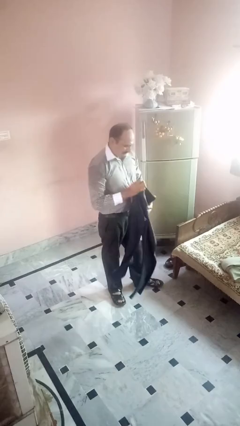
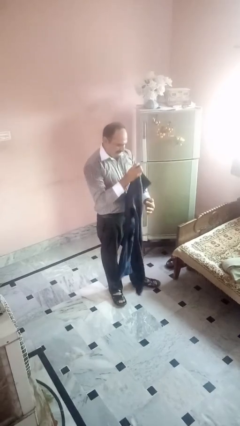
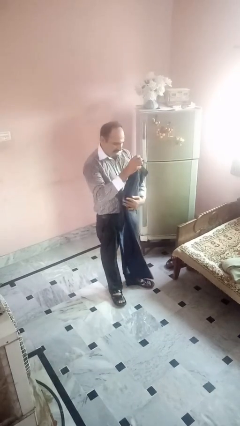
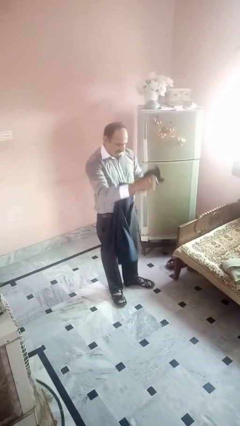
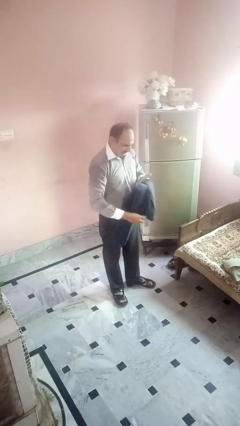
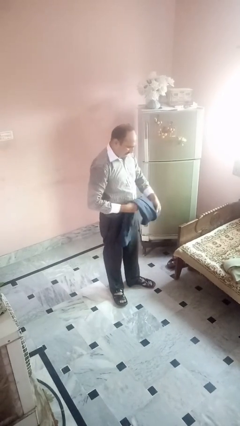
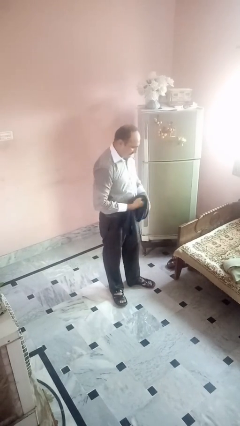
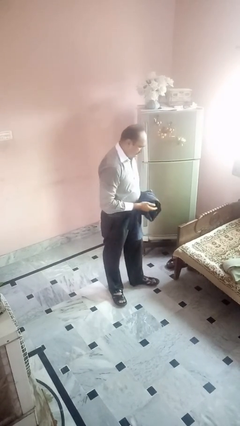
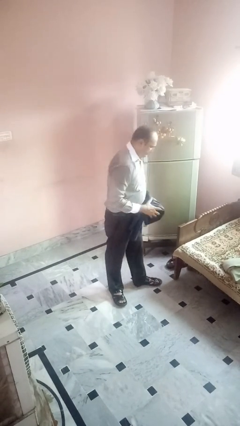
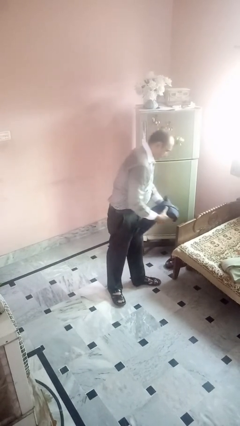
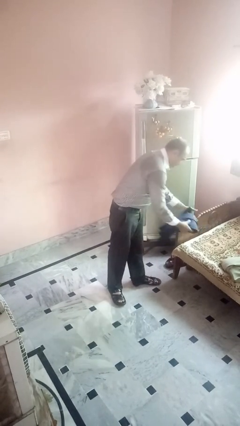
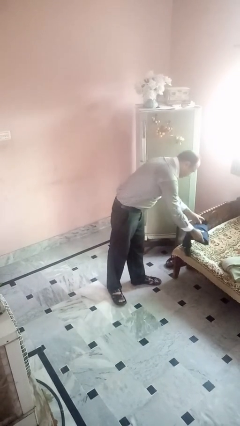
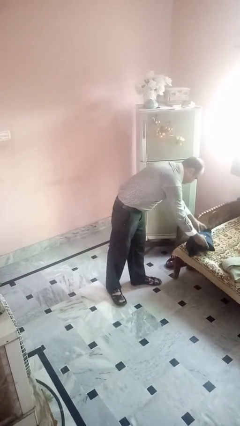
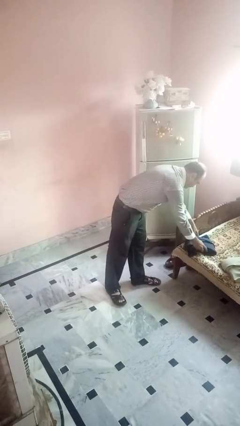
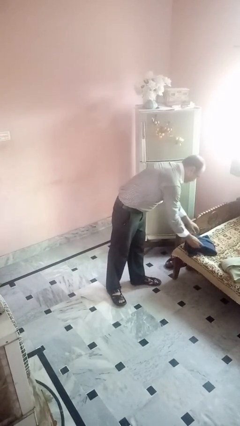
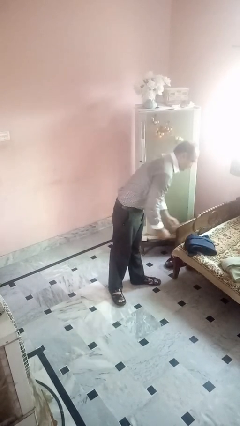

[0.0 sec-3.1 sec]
person folds pants

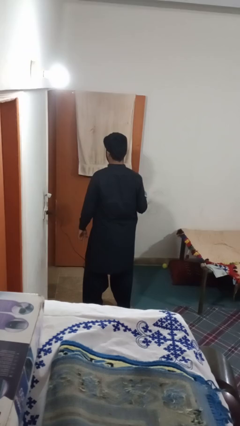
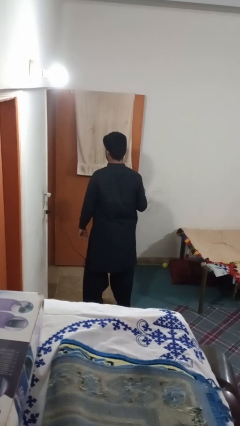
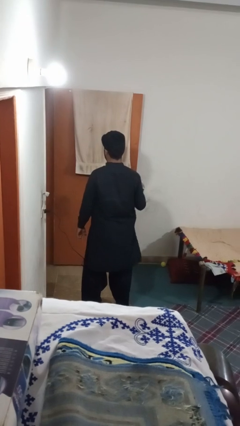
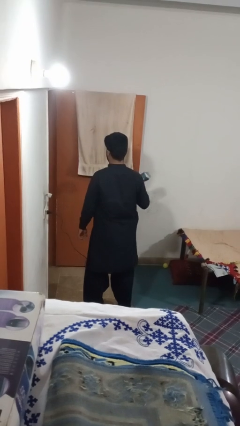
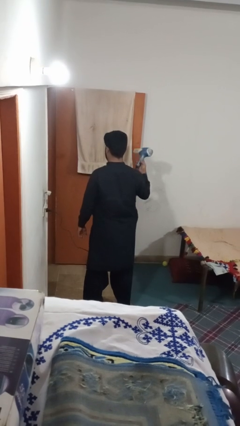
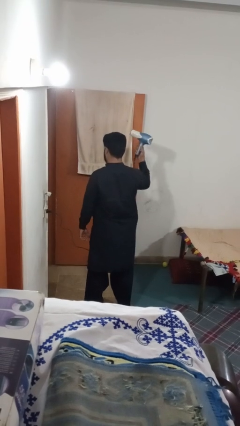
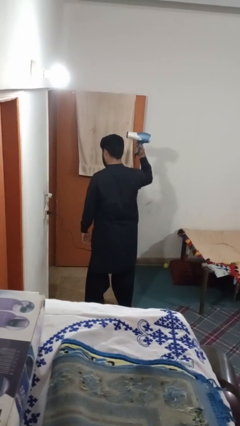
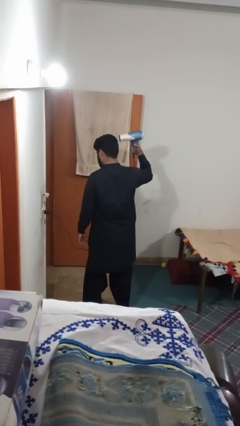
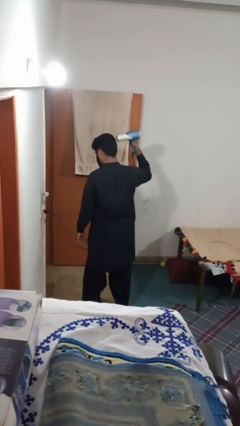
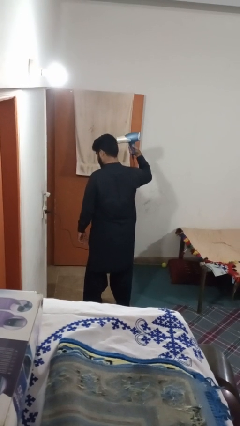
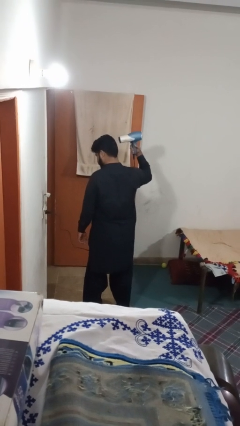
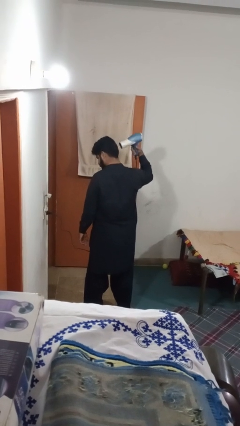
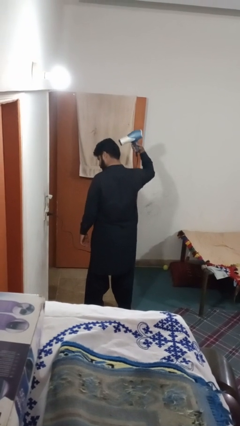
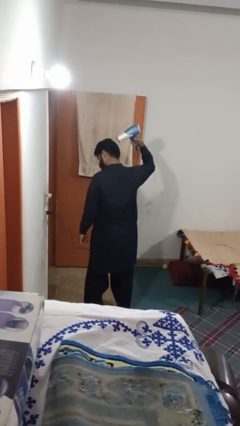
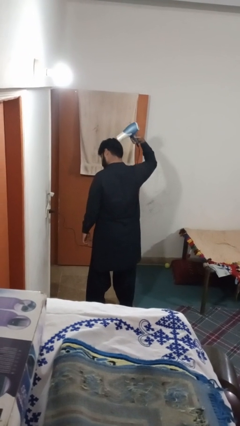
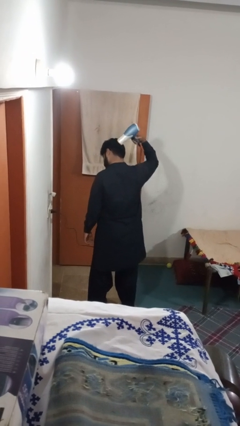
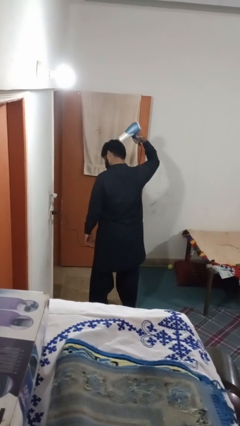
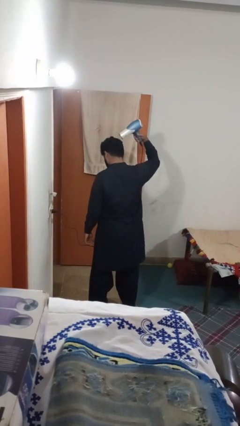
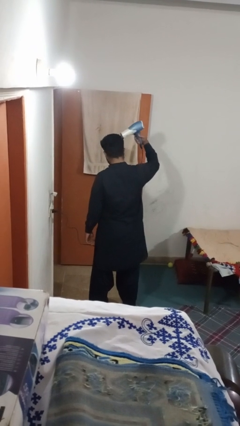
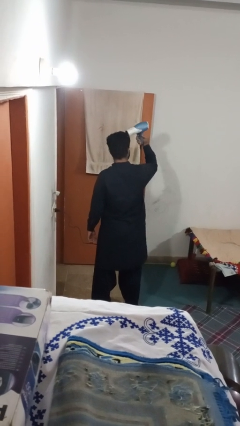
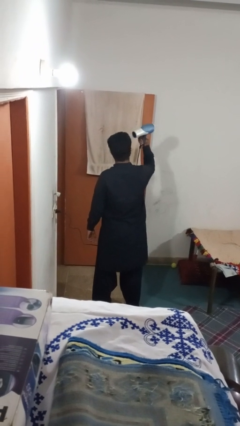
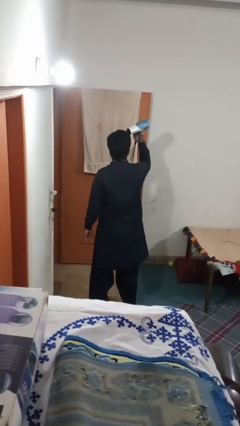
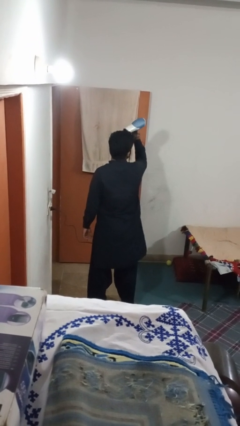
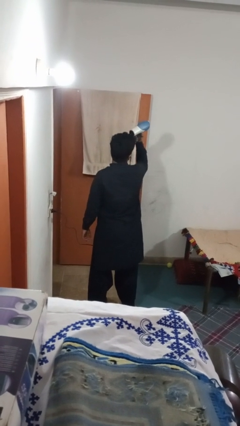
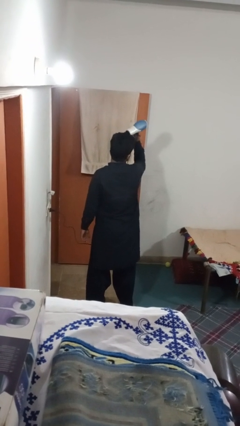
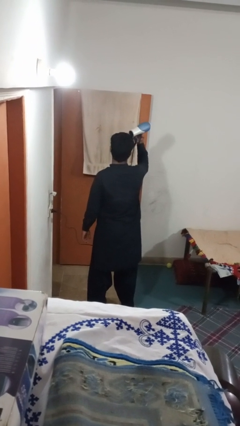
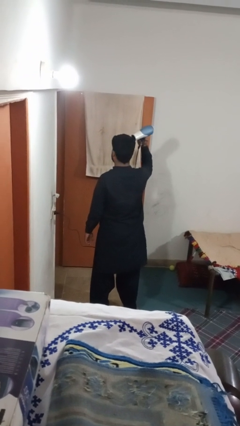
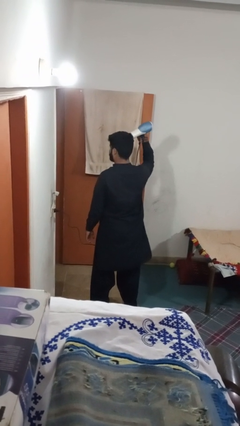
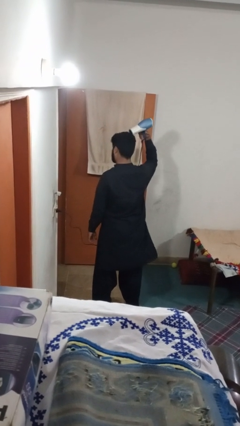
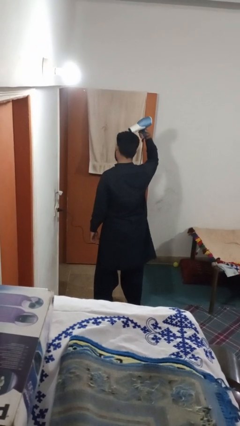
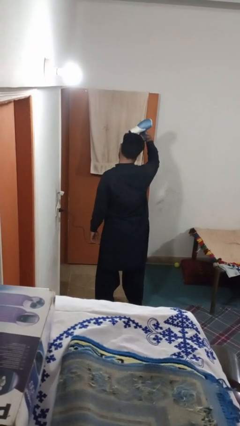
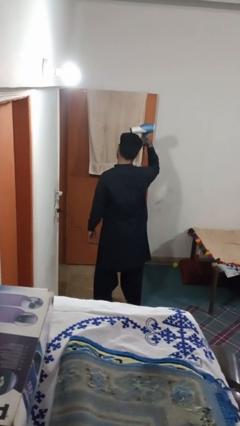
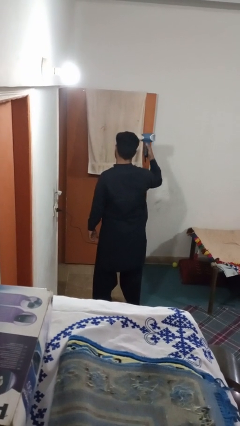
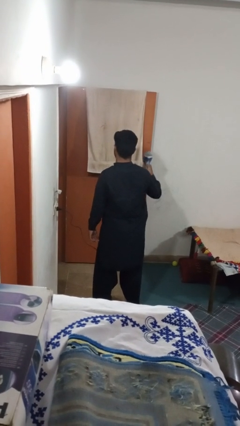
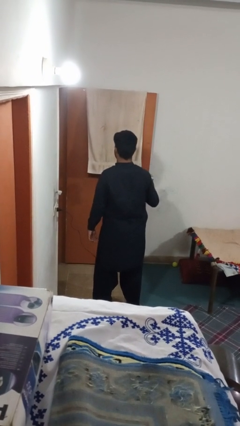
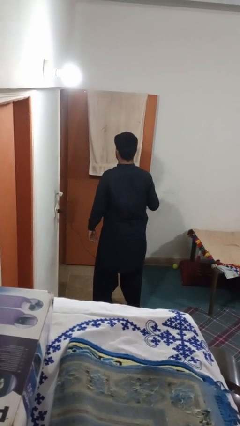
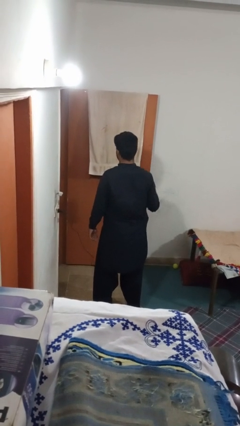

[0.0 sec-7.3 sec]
person dries hair with hairdryer

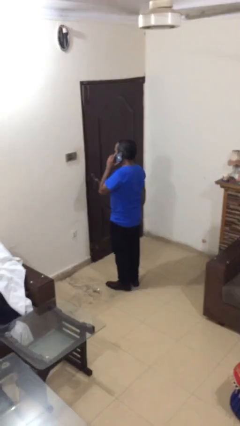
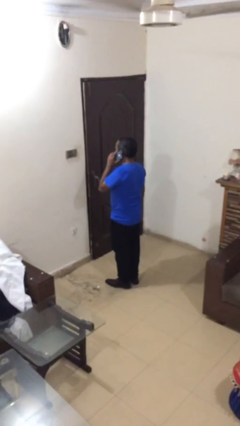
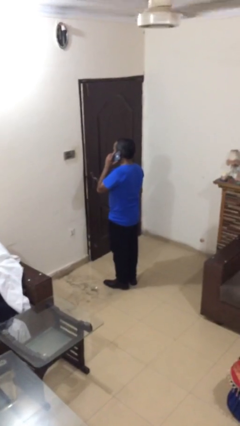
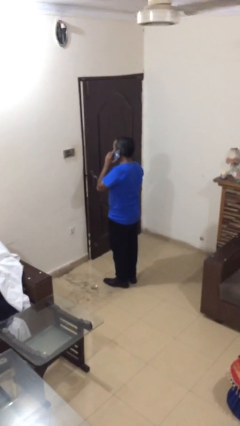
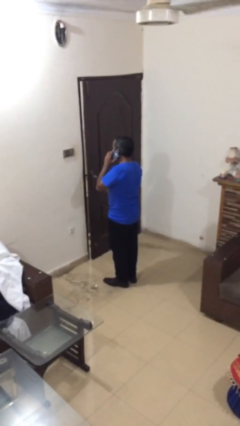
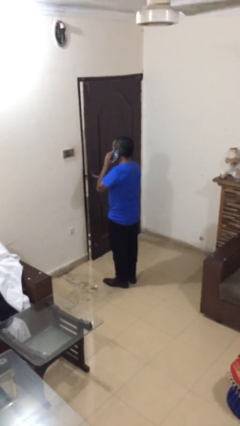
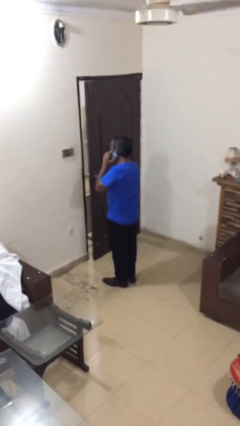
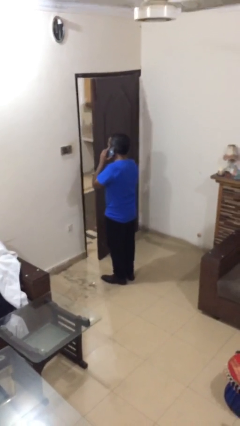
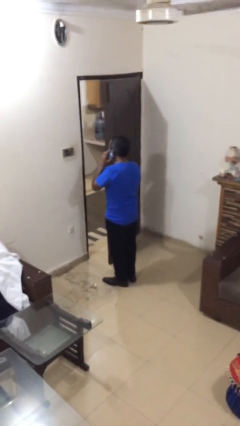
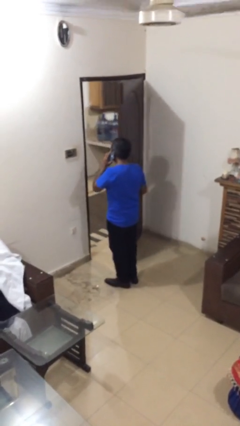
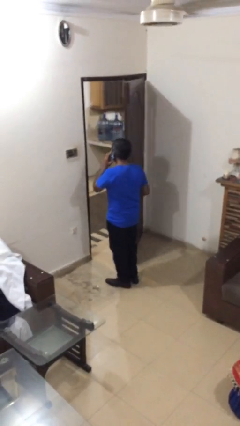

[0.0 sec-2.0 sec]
person opens facility door

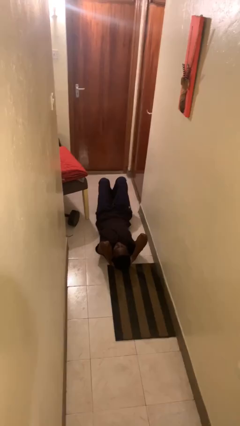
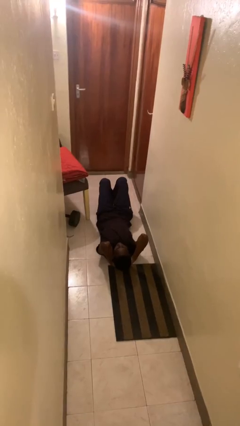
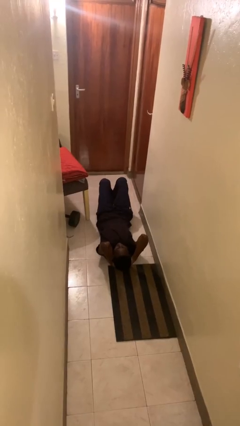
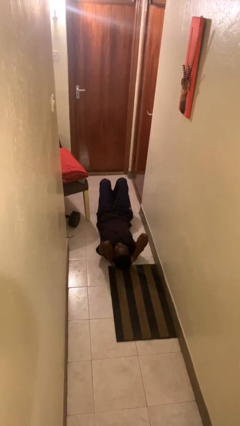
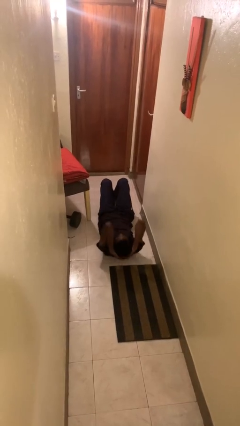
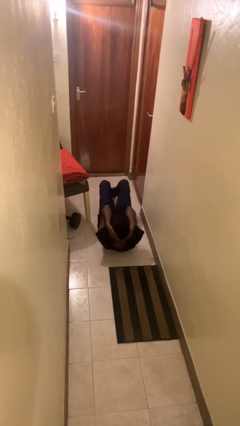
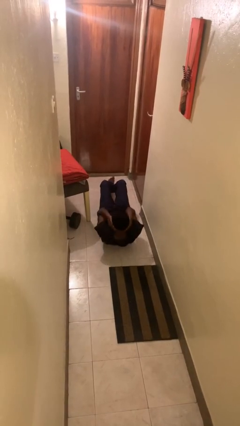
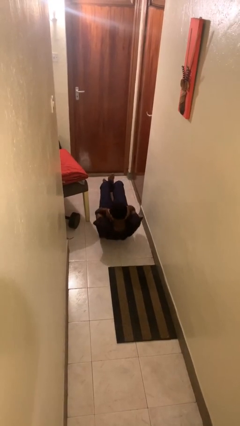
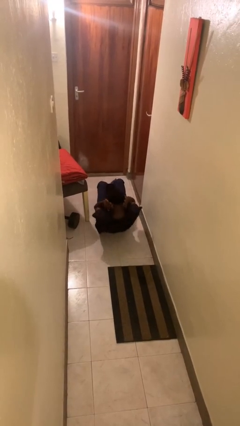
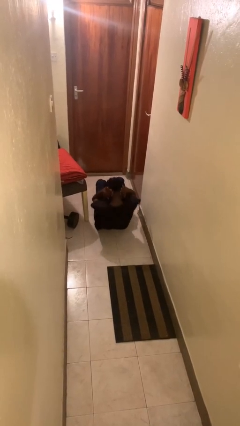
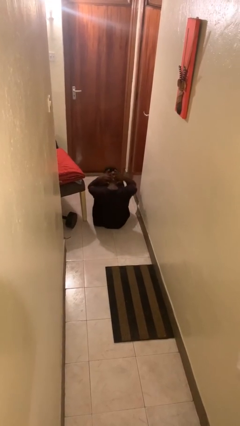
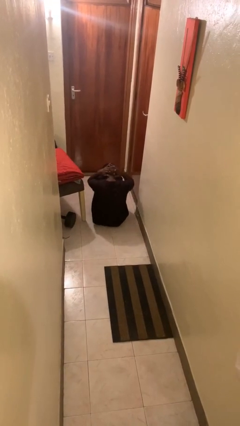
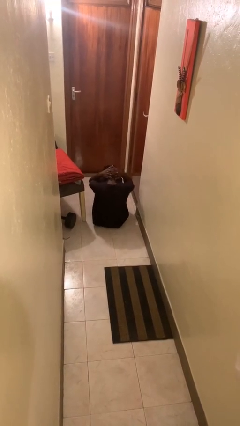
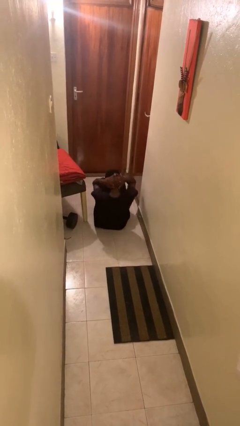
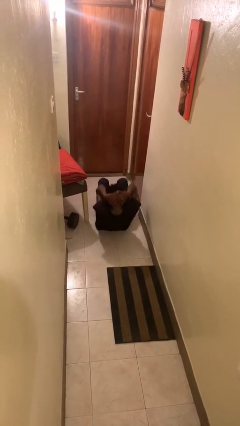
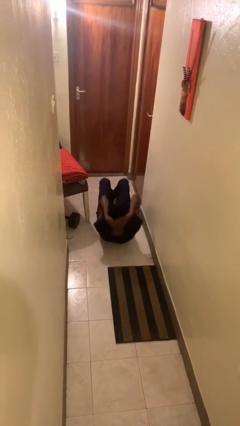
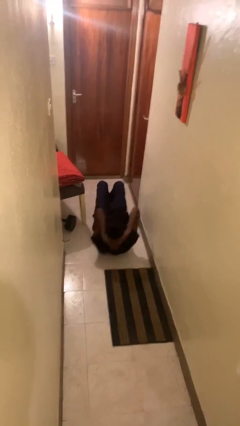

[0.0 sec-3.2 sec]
person exercises with situp

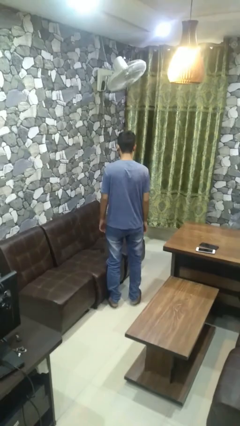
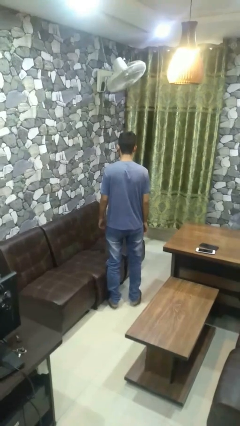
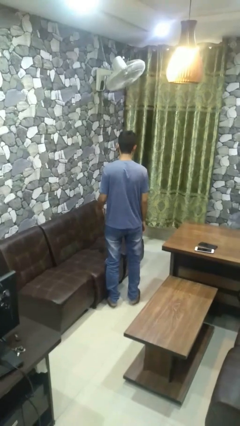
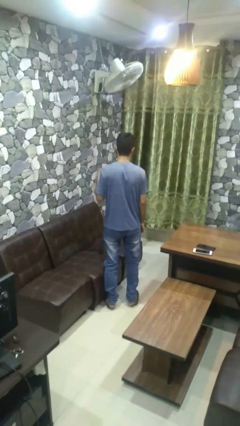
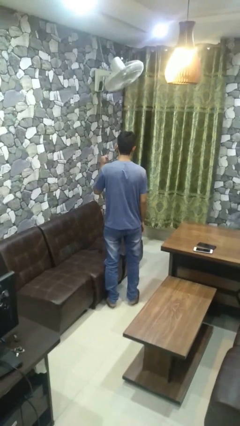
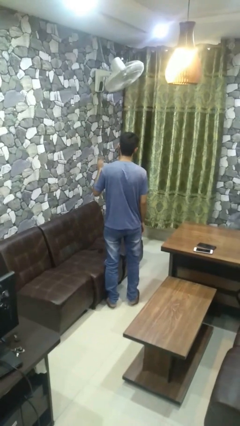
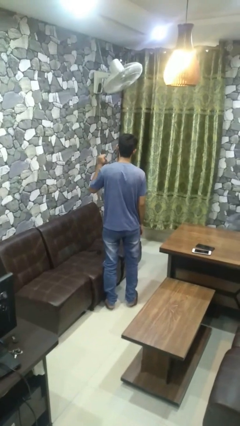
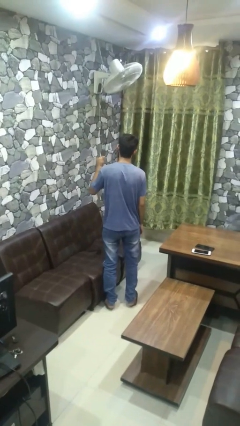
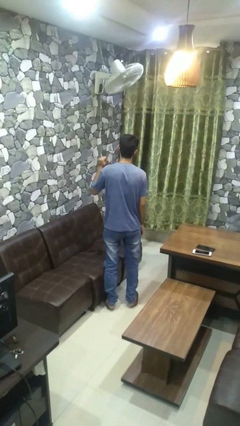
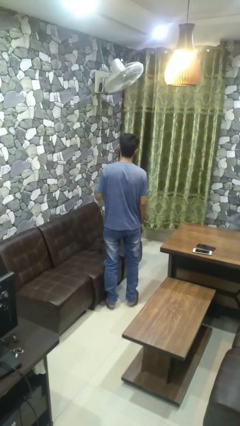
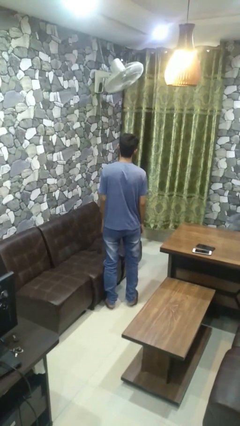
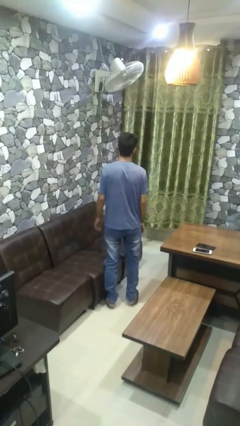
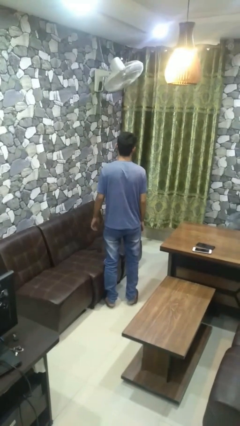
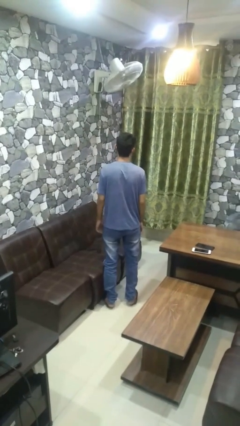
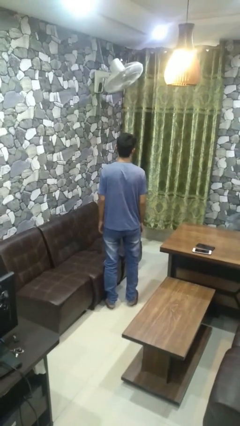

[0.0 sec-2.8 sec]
person gestures behind me
